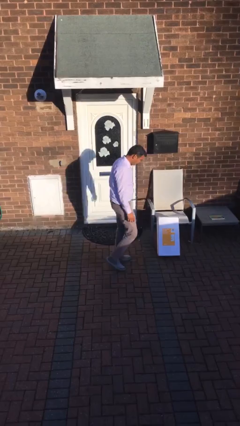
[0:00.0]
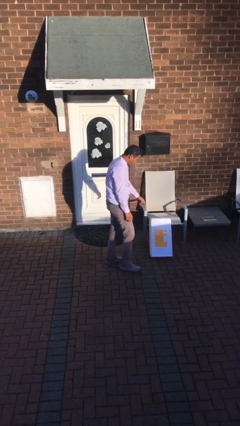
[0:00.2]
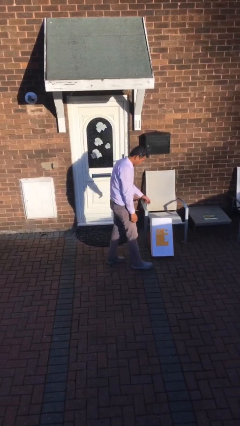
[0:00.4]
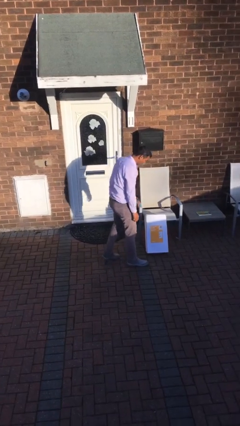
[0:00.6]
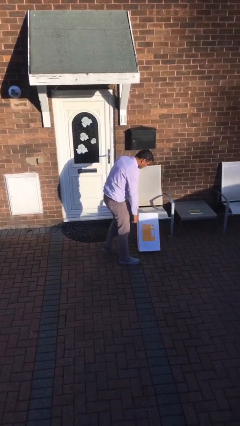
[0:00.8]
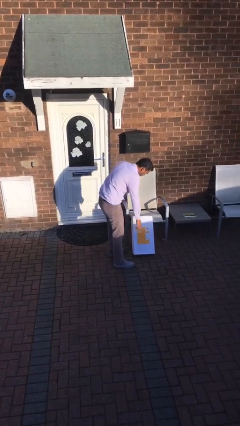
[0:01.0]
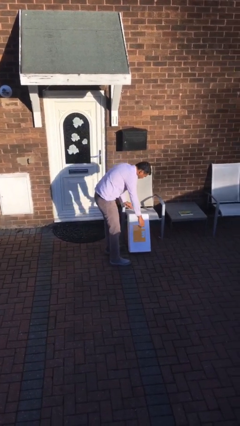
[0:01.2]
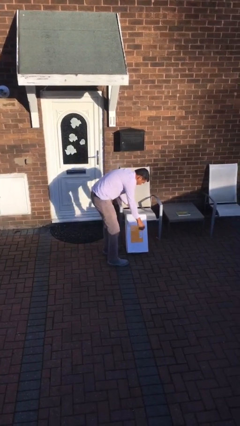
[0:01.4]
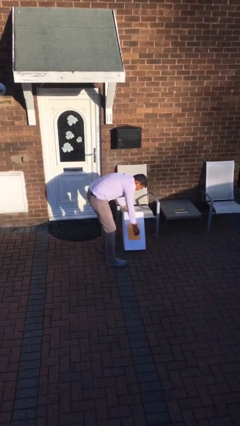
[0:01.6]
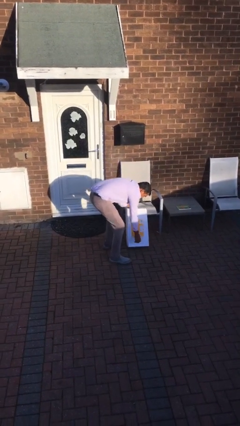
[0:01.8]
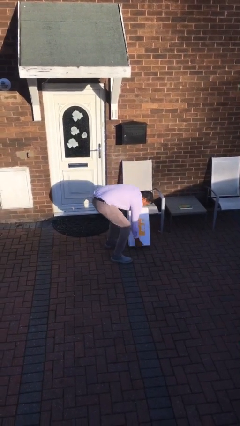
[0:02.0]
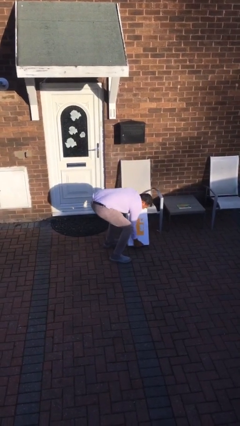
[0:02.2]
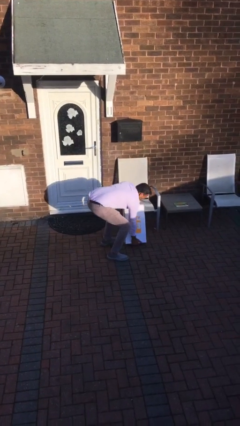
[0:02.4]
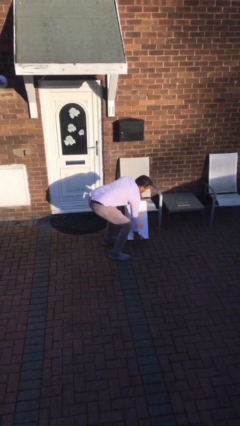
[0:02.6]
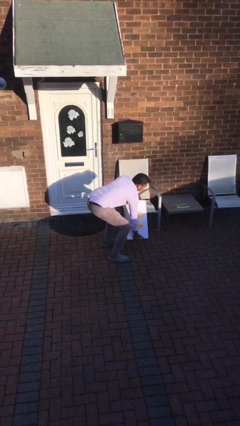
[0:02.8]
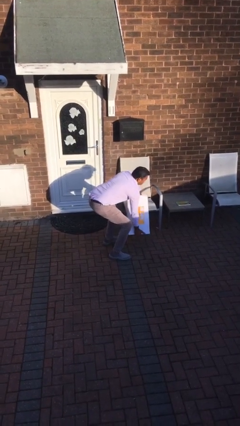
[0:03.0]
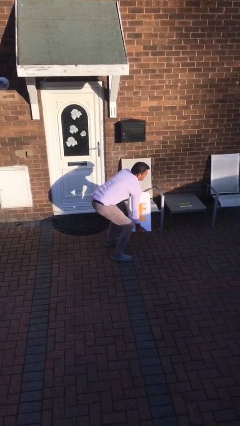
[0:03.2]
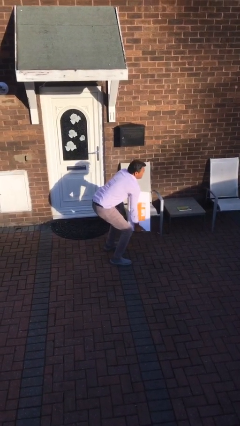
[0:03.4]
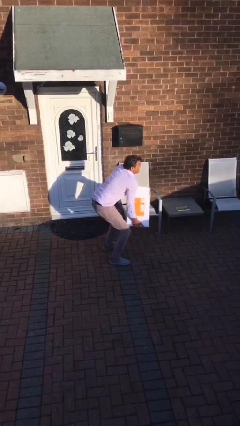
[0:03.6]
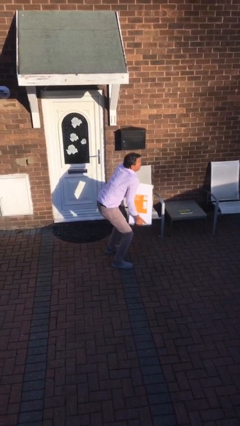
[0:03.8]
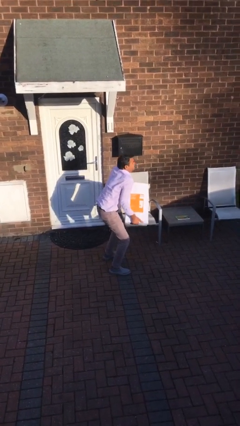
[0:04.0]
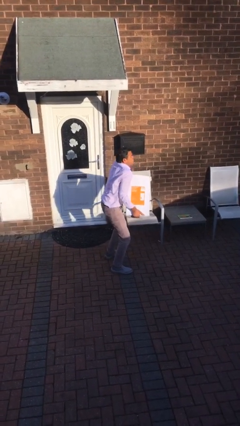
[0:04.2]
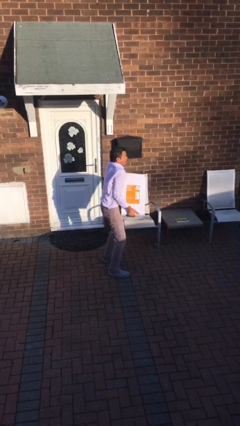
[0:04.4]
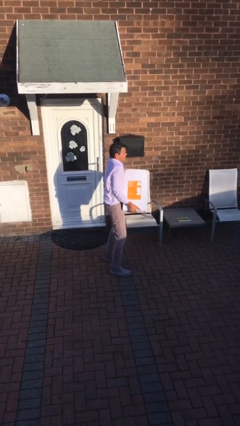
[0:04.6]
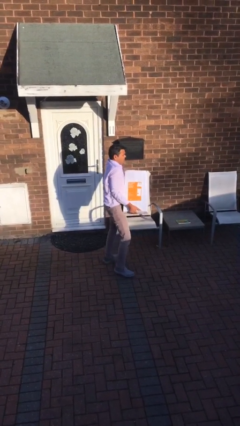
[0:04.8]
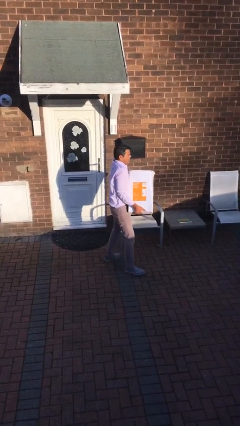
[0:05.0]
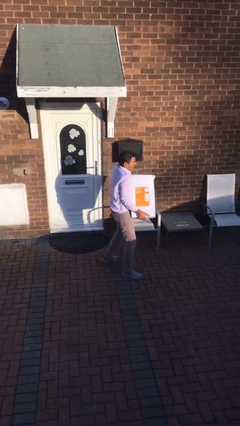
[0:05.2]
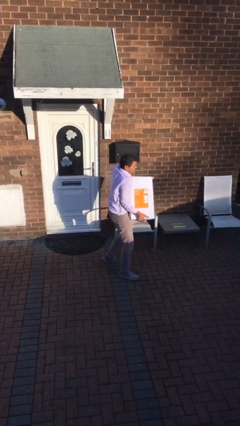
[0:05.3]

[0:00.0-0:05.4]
person picks up object from floor

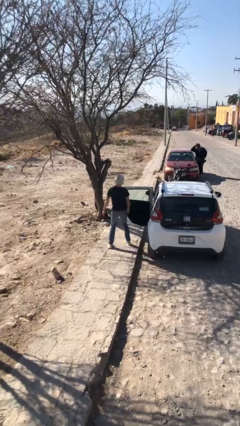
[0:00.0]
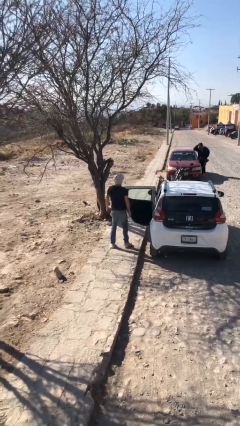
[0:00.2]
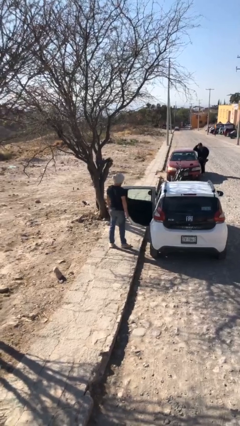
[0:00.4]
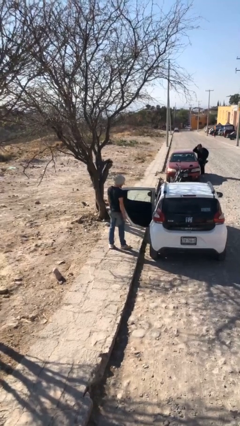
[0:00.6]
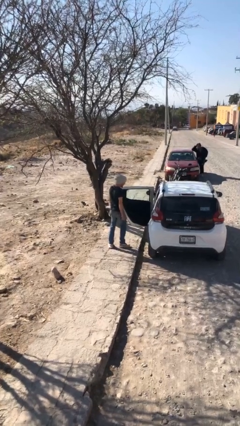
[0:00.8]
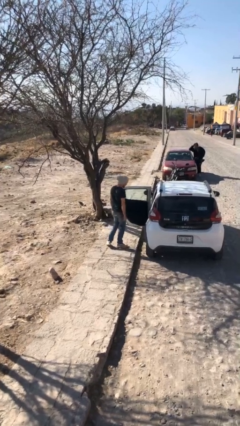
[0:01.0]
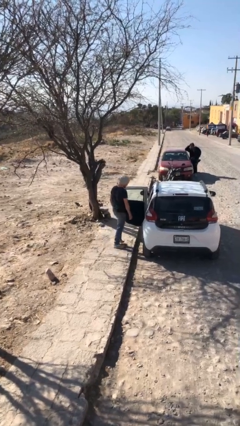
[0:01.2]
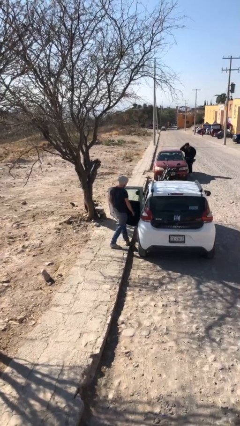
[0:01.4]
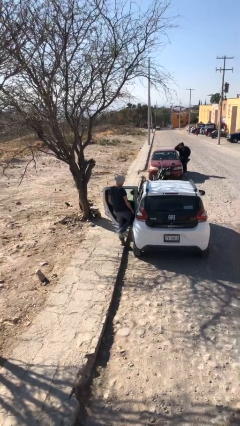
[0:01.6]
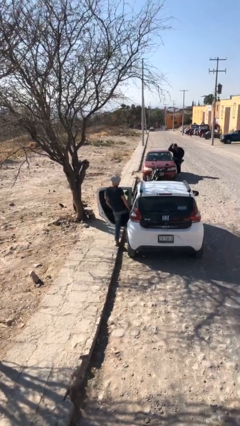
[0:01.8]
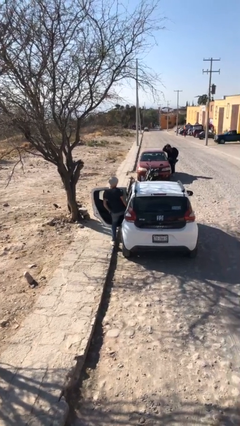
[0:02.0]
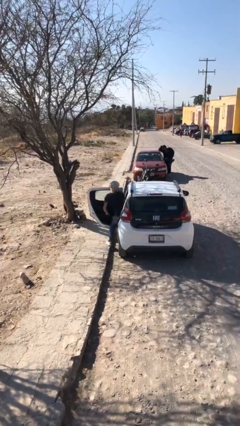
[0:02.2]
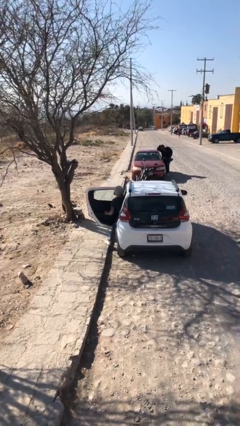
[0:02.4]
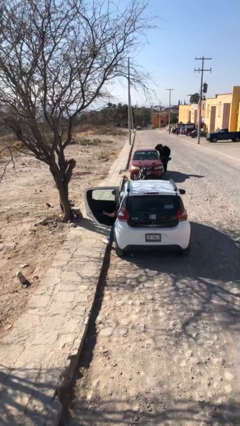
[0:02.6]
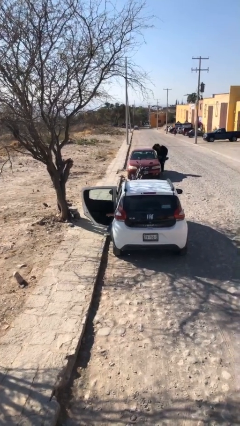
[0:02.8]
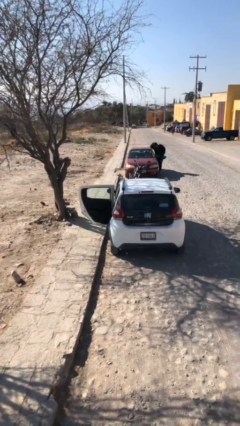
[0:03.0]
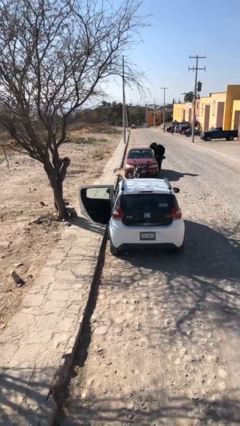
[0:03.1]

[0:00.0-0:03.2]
person enters car

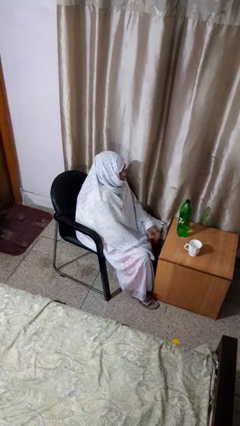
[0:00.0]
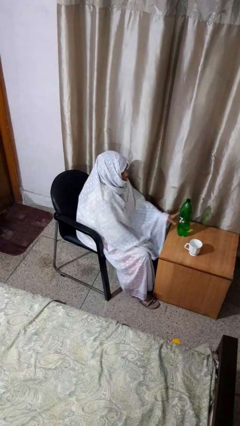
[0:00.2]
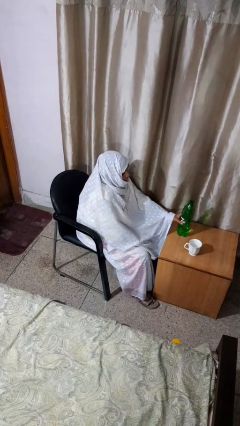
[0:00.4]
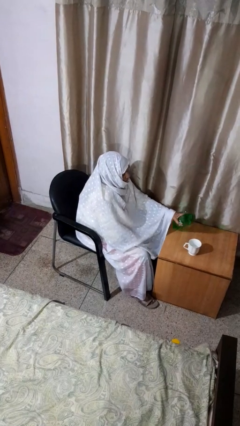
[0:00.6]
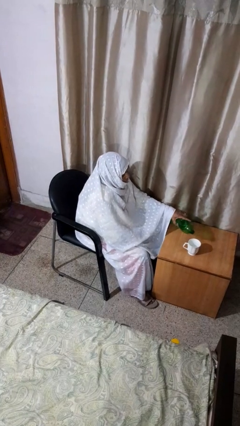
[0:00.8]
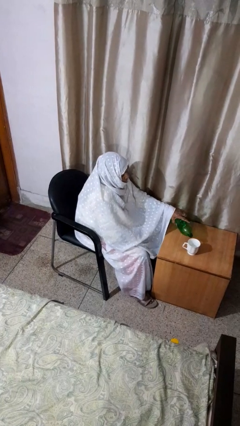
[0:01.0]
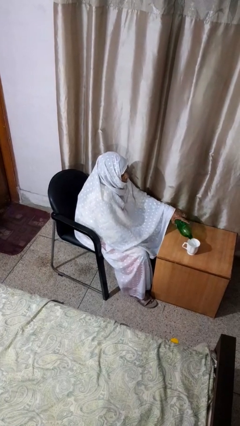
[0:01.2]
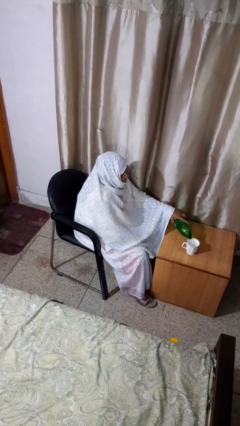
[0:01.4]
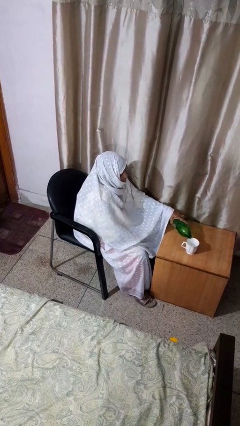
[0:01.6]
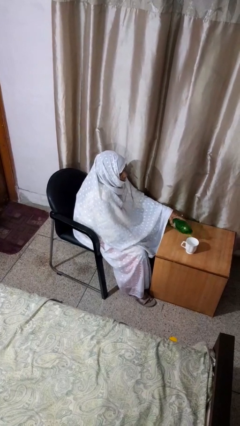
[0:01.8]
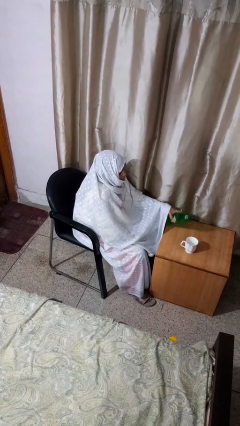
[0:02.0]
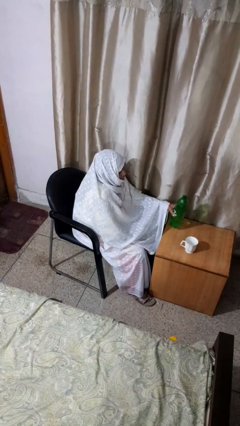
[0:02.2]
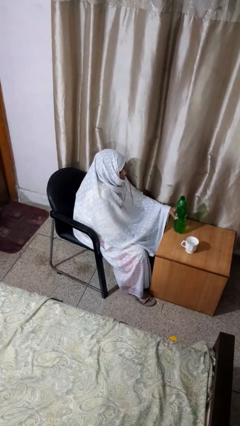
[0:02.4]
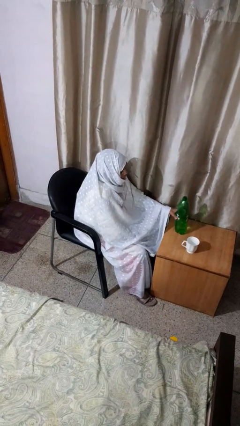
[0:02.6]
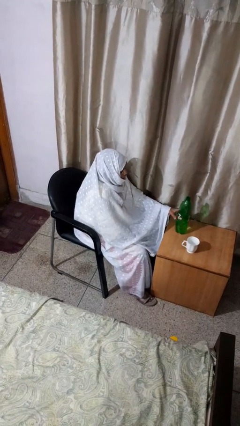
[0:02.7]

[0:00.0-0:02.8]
person pours liquid into cup

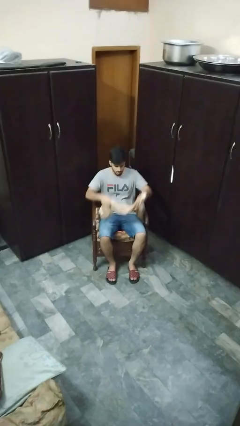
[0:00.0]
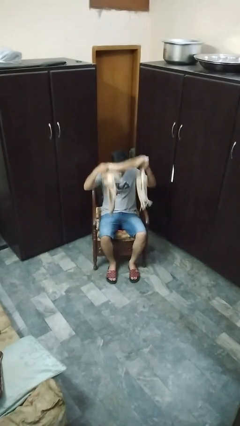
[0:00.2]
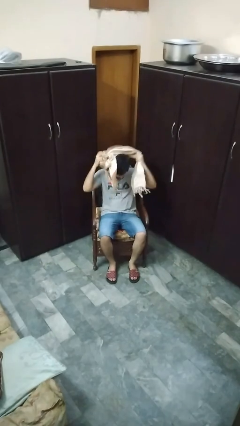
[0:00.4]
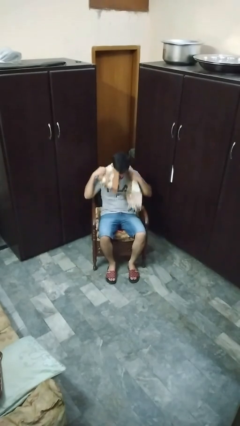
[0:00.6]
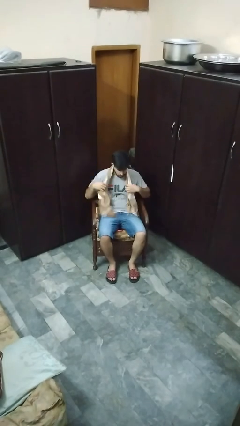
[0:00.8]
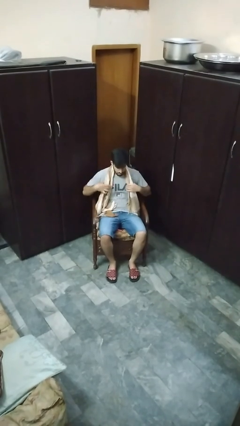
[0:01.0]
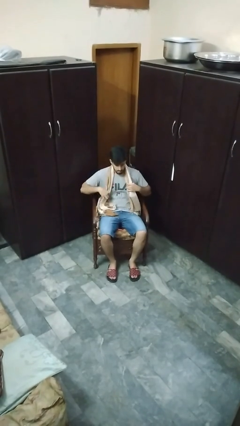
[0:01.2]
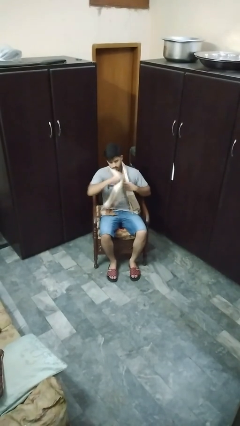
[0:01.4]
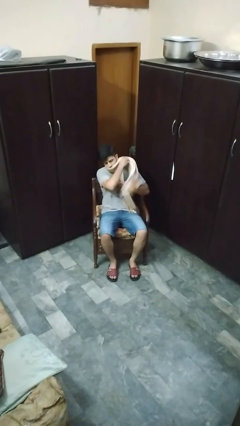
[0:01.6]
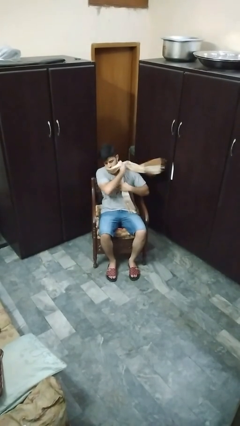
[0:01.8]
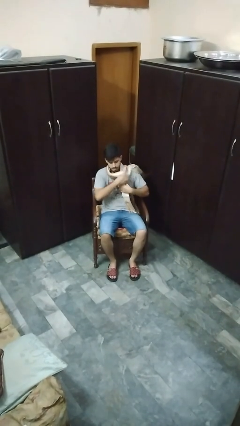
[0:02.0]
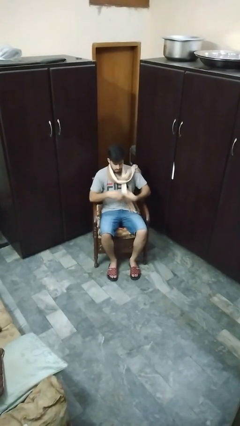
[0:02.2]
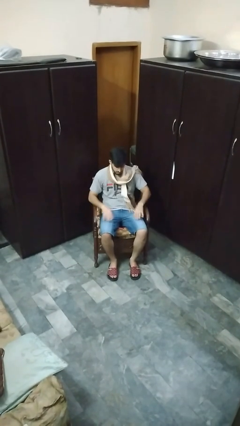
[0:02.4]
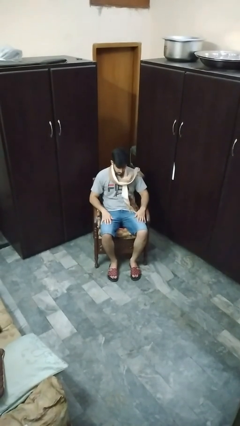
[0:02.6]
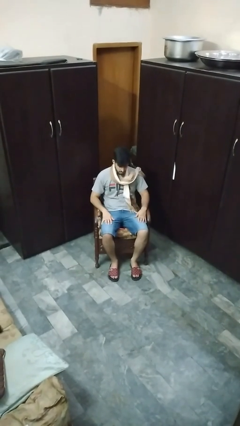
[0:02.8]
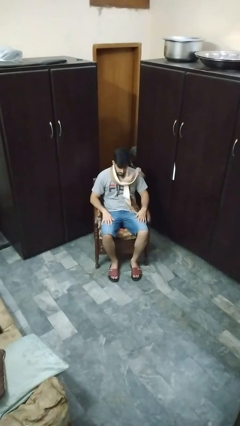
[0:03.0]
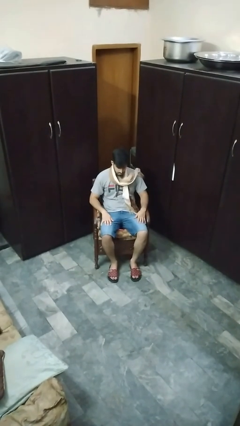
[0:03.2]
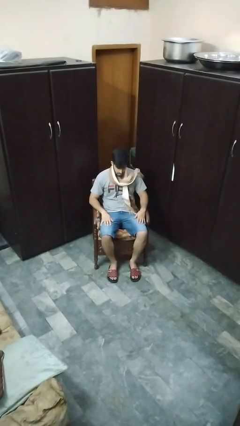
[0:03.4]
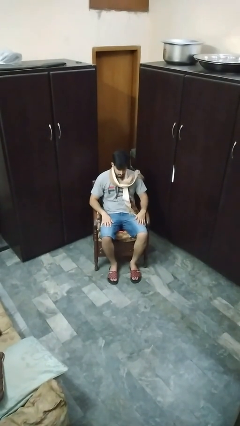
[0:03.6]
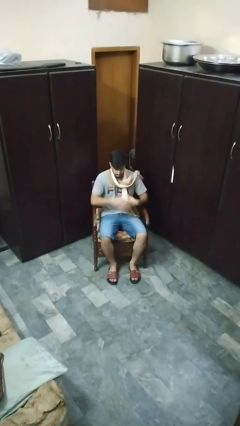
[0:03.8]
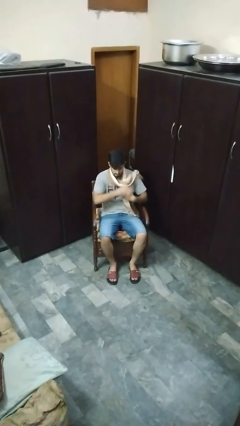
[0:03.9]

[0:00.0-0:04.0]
person puts on scarf

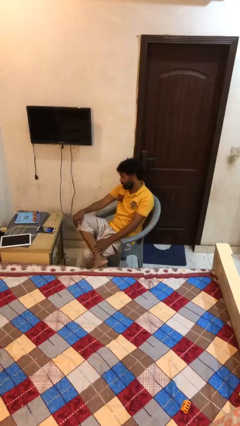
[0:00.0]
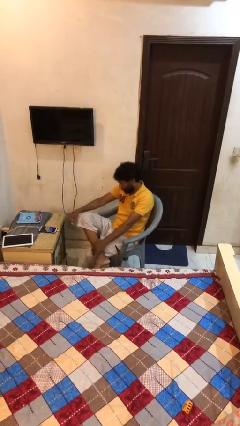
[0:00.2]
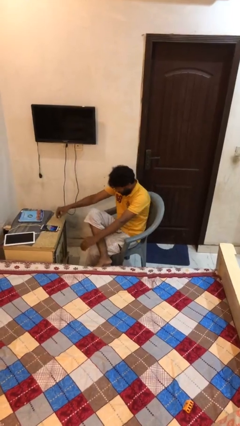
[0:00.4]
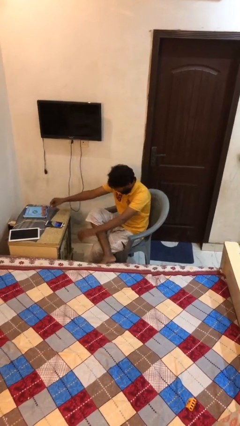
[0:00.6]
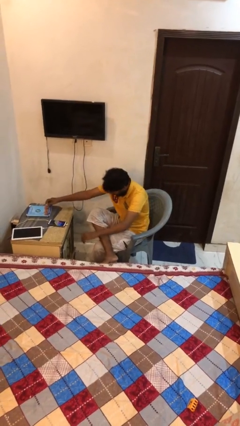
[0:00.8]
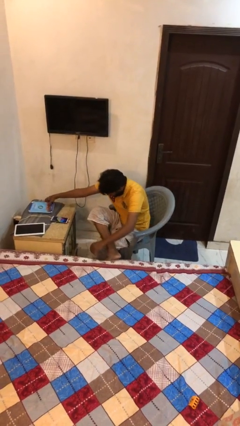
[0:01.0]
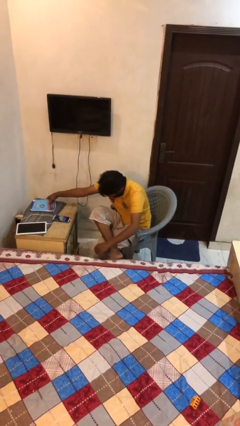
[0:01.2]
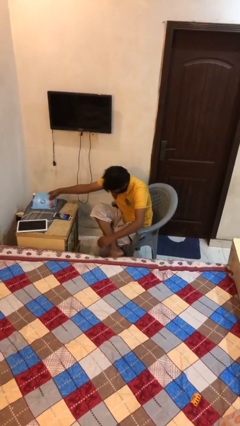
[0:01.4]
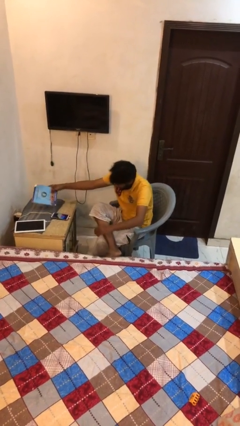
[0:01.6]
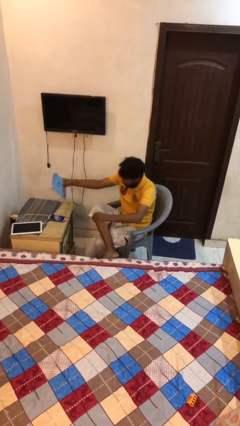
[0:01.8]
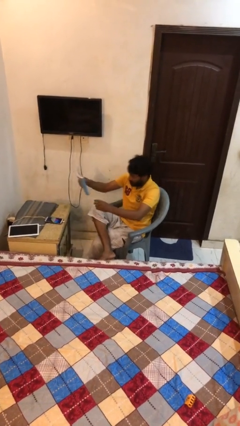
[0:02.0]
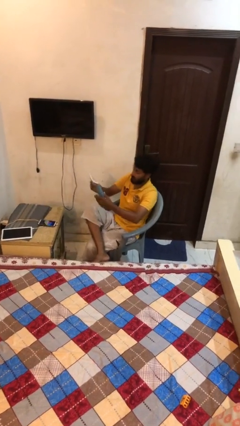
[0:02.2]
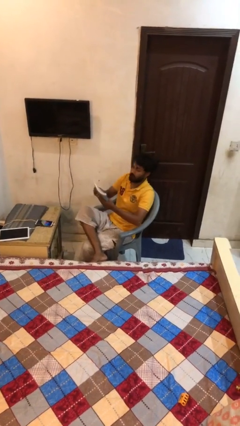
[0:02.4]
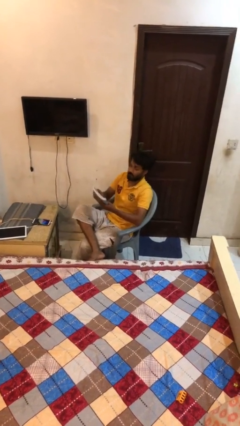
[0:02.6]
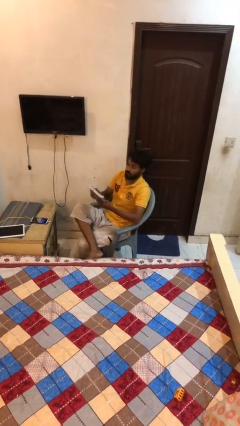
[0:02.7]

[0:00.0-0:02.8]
person picks up object from table
